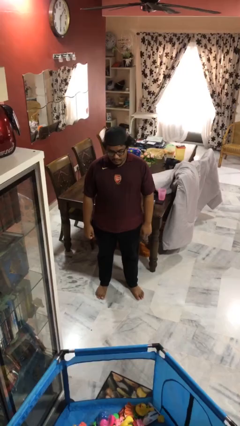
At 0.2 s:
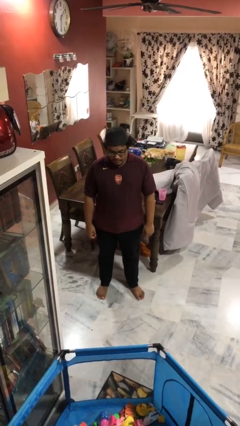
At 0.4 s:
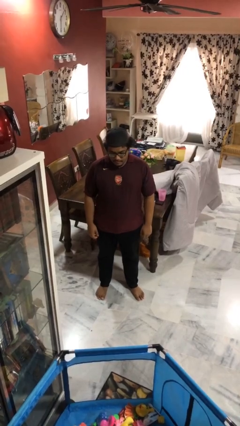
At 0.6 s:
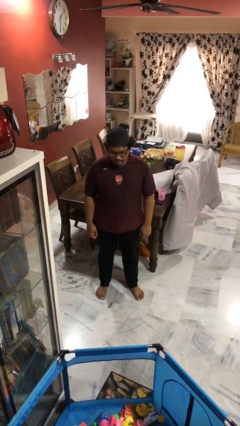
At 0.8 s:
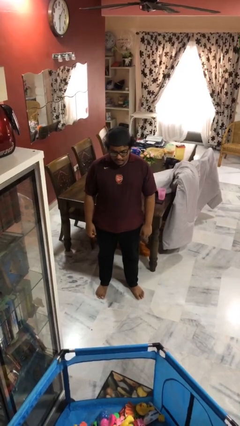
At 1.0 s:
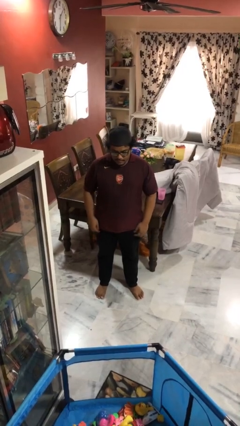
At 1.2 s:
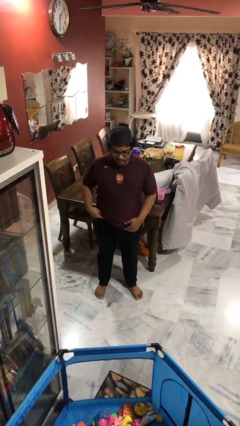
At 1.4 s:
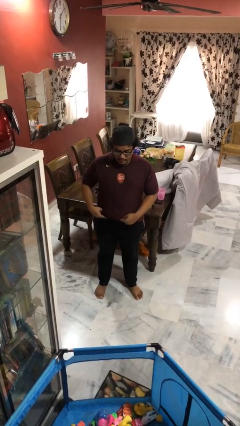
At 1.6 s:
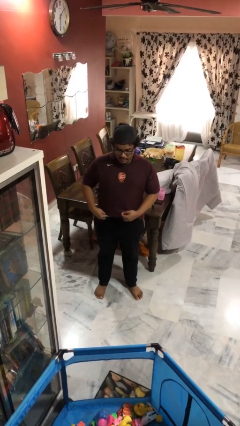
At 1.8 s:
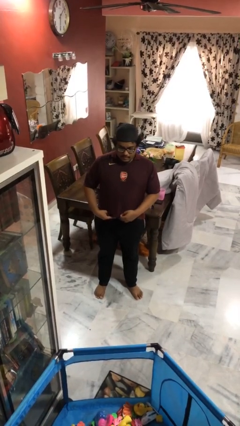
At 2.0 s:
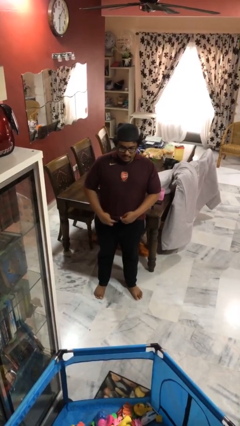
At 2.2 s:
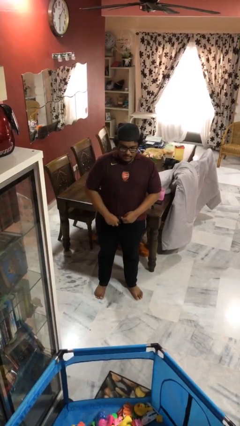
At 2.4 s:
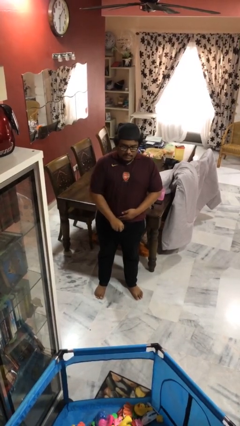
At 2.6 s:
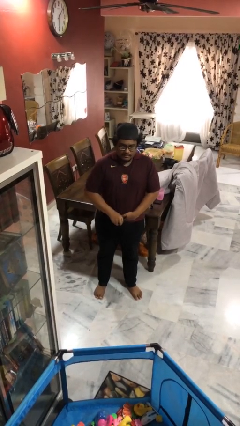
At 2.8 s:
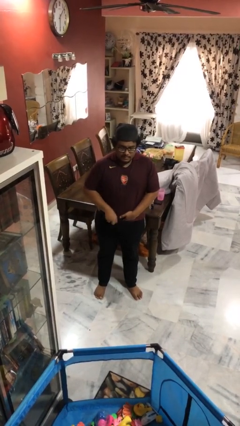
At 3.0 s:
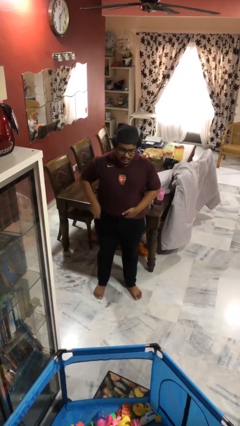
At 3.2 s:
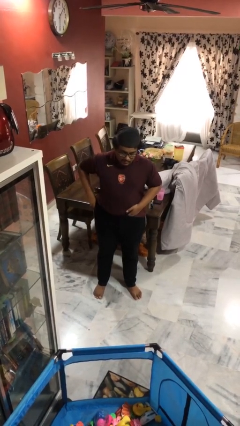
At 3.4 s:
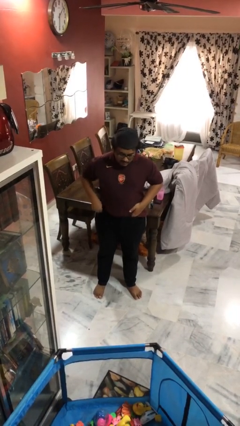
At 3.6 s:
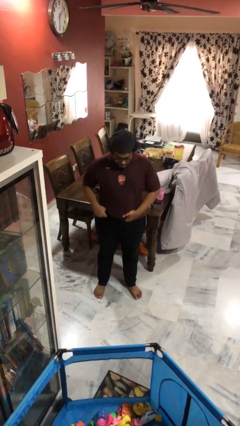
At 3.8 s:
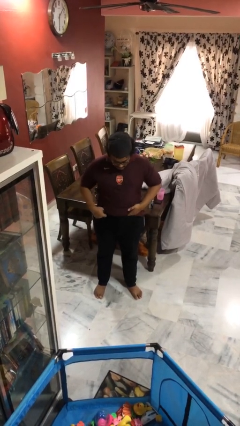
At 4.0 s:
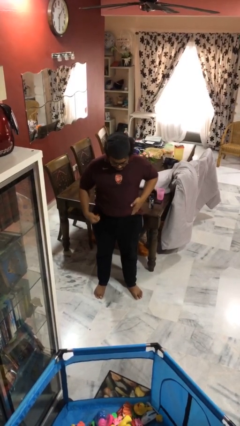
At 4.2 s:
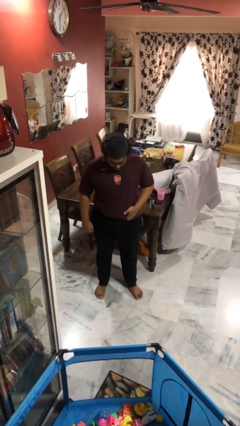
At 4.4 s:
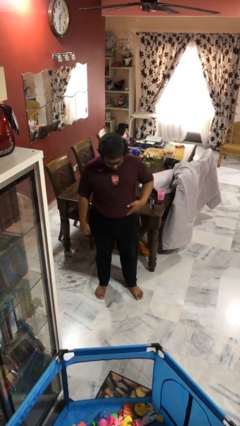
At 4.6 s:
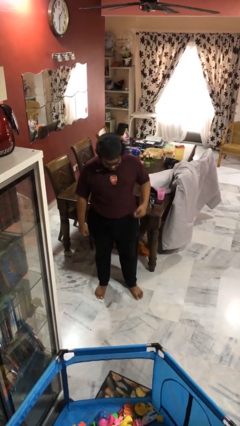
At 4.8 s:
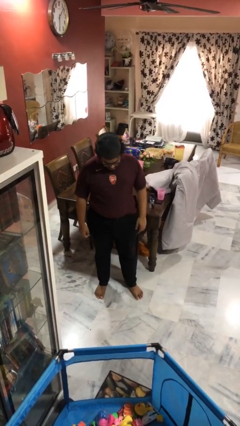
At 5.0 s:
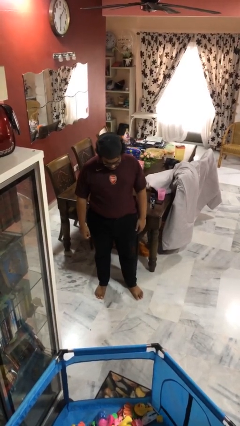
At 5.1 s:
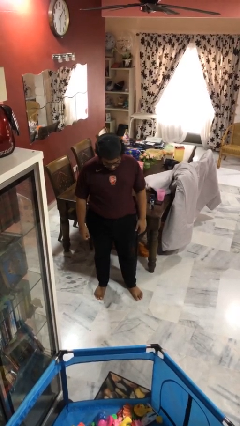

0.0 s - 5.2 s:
person tucks in shirt

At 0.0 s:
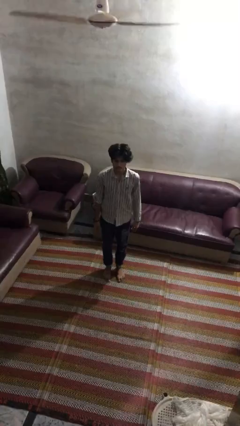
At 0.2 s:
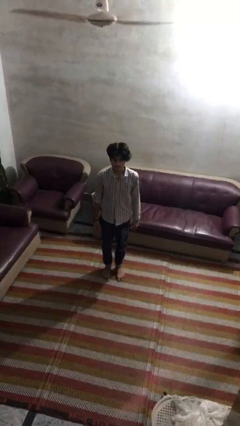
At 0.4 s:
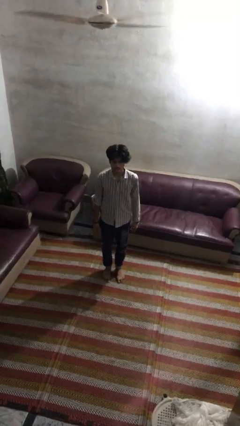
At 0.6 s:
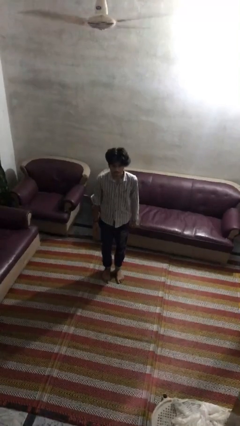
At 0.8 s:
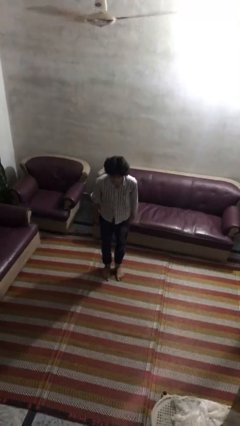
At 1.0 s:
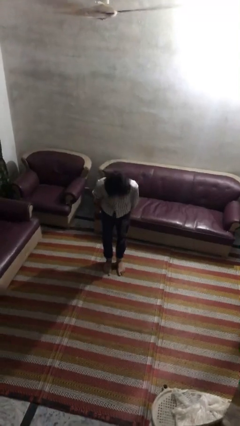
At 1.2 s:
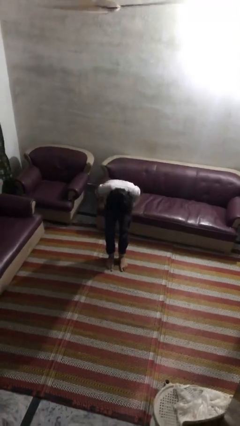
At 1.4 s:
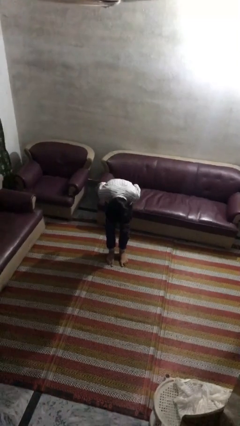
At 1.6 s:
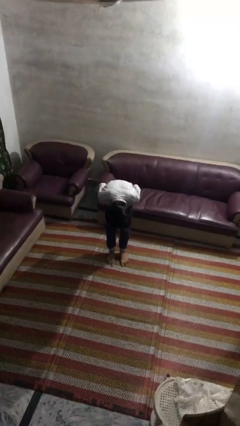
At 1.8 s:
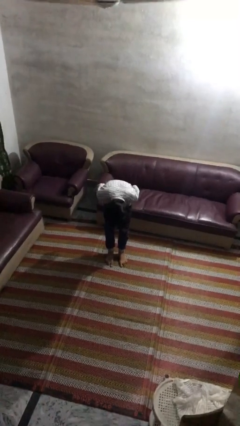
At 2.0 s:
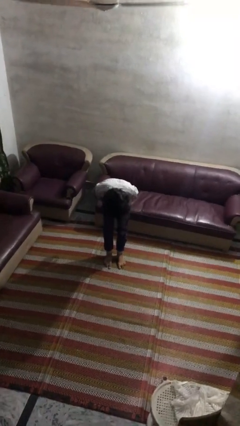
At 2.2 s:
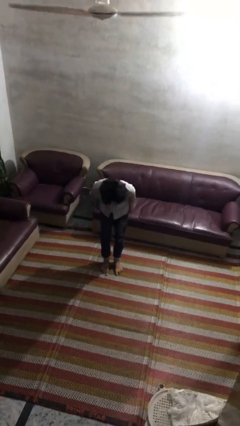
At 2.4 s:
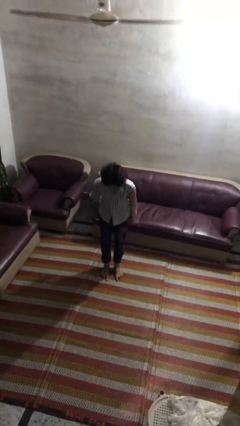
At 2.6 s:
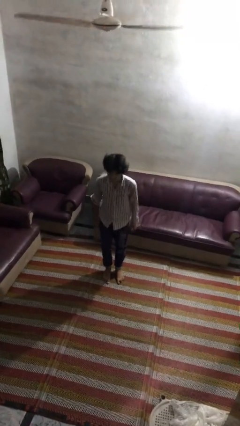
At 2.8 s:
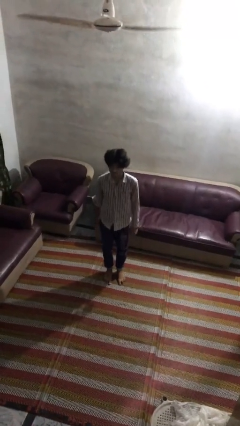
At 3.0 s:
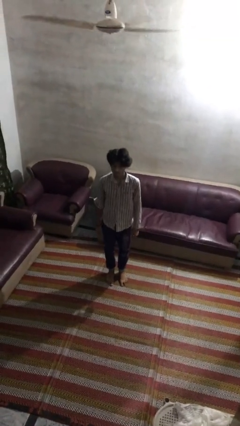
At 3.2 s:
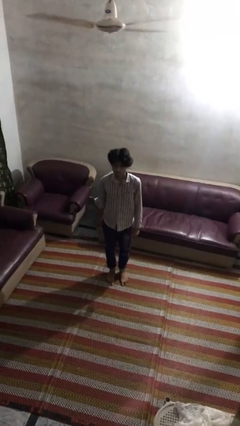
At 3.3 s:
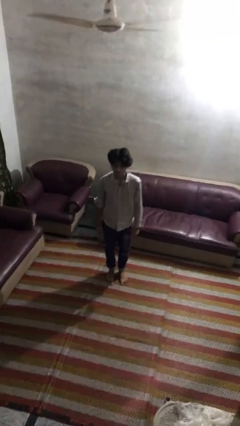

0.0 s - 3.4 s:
person bows

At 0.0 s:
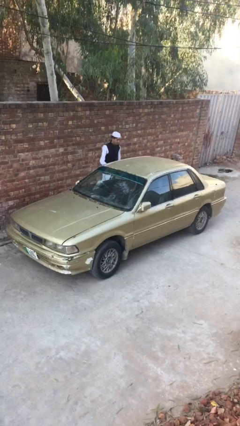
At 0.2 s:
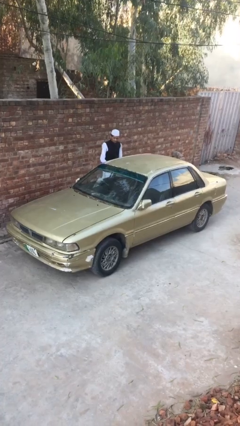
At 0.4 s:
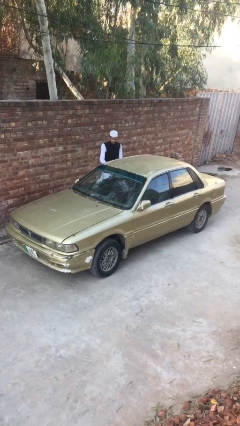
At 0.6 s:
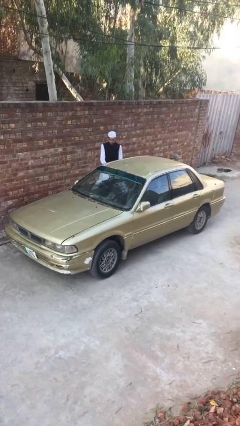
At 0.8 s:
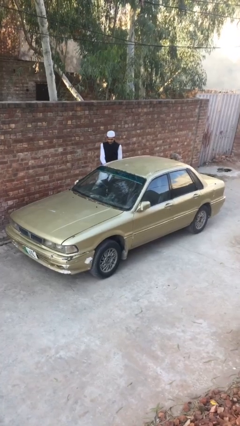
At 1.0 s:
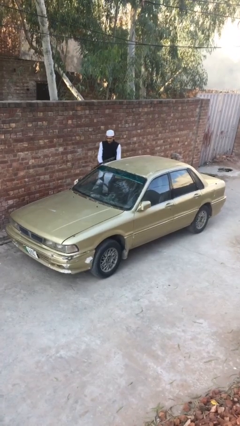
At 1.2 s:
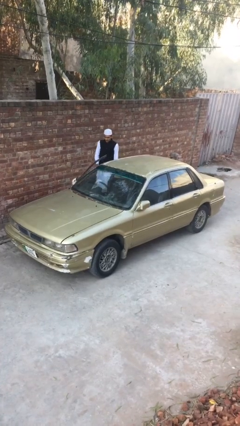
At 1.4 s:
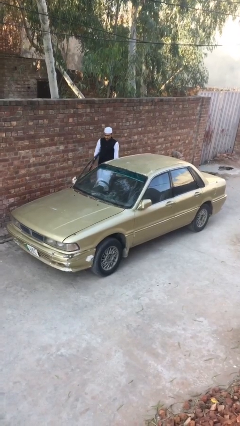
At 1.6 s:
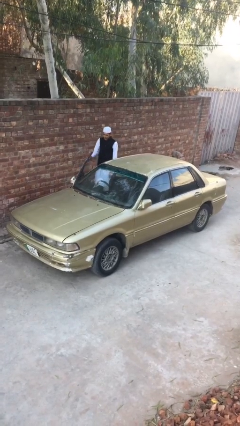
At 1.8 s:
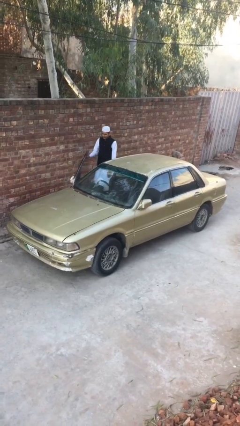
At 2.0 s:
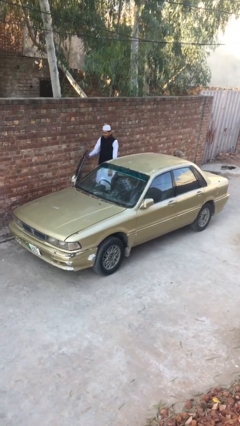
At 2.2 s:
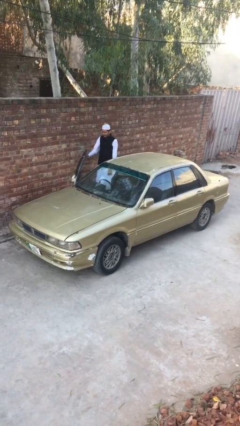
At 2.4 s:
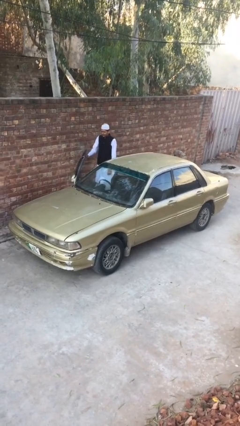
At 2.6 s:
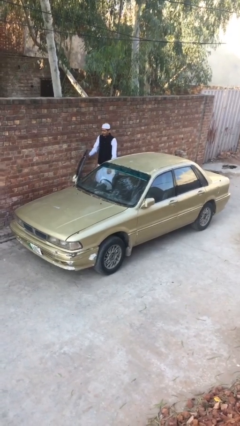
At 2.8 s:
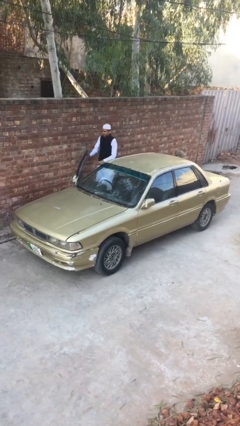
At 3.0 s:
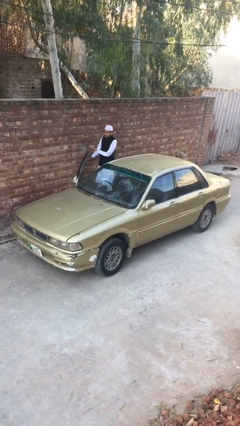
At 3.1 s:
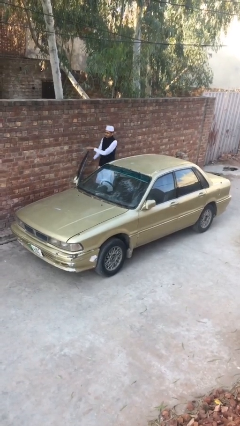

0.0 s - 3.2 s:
person opens car door

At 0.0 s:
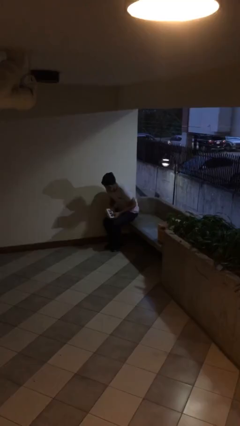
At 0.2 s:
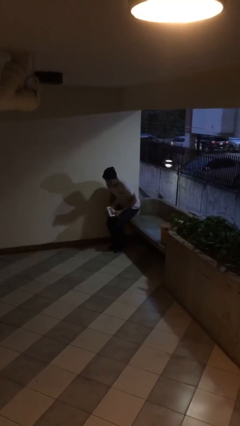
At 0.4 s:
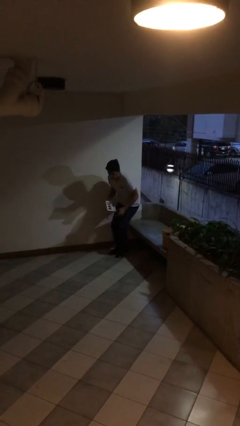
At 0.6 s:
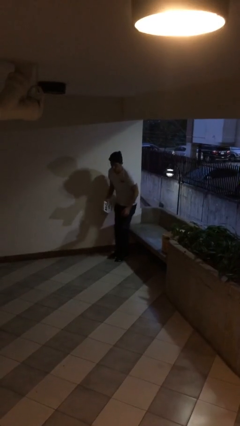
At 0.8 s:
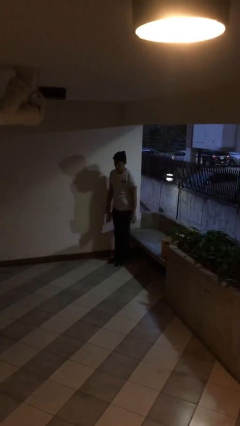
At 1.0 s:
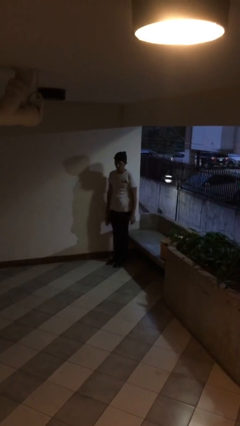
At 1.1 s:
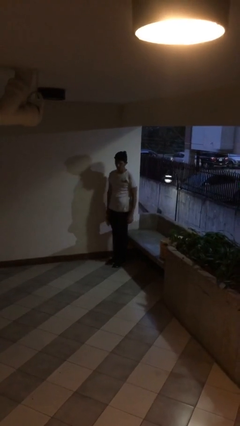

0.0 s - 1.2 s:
person stands up

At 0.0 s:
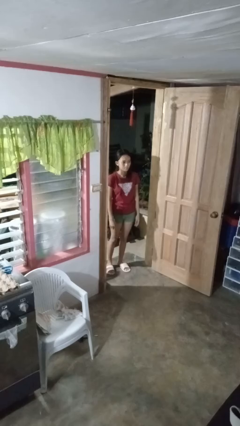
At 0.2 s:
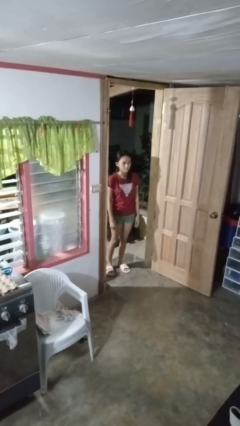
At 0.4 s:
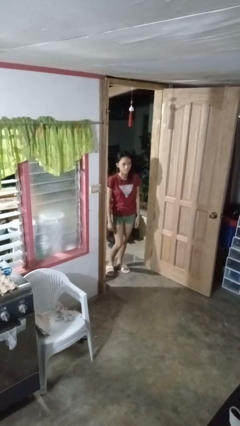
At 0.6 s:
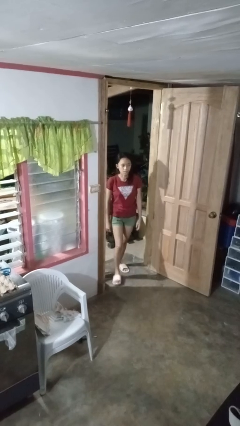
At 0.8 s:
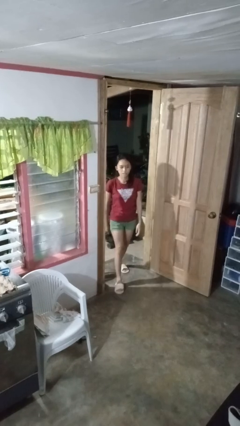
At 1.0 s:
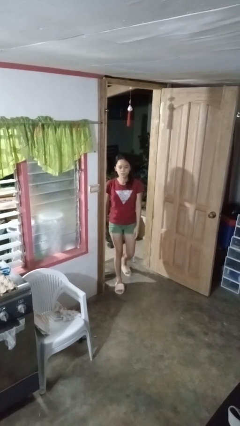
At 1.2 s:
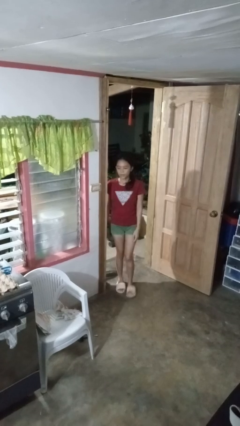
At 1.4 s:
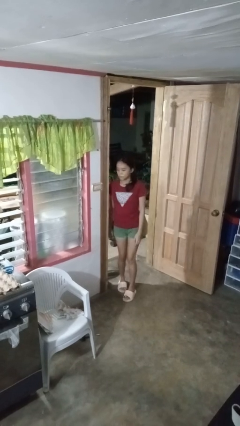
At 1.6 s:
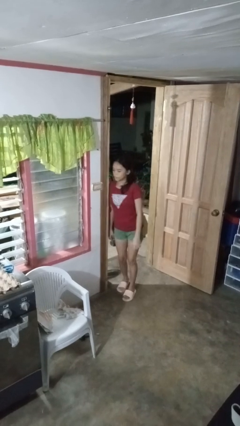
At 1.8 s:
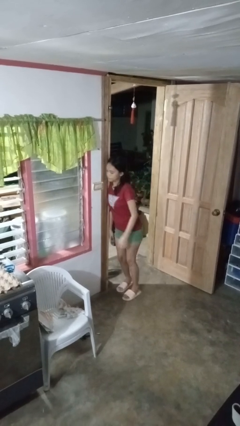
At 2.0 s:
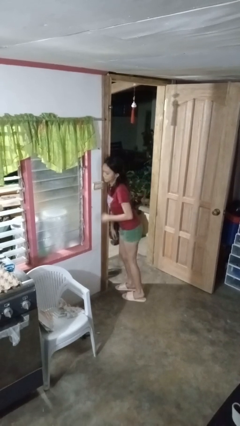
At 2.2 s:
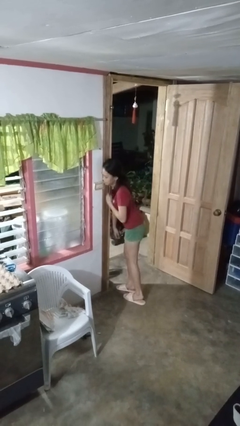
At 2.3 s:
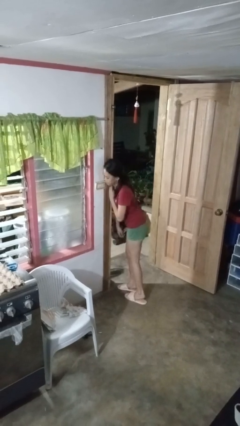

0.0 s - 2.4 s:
person bumps into wall

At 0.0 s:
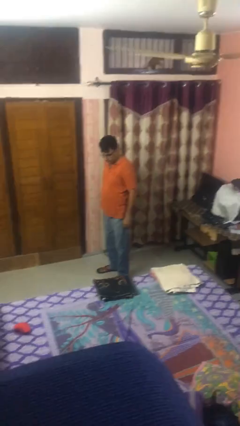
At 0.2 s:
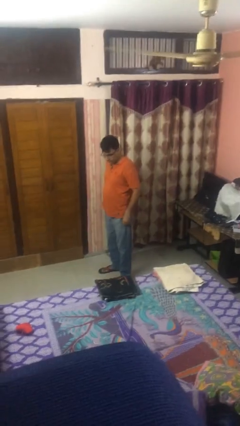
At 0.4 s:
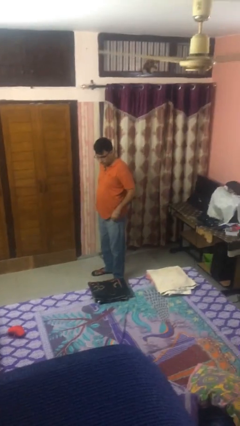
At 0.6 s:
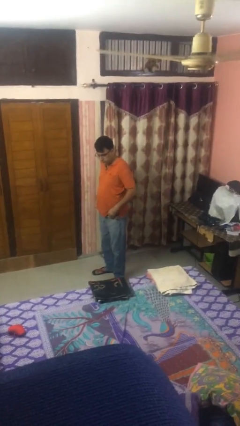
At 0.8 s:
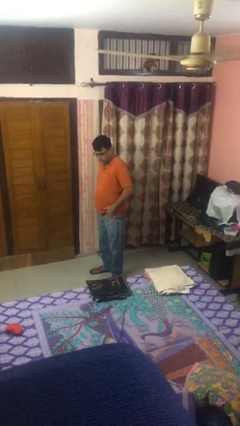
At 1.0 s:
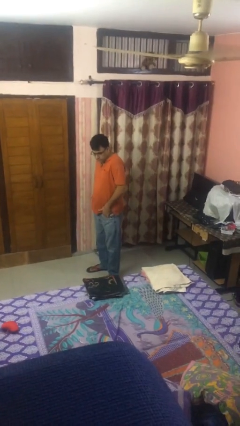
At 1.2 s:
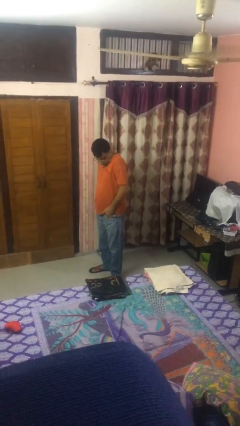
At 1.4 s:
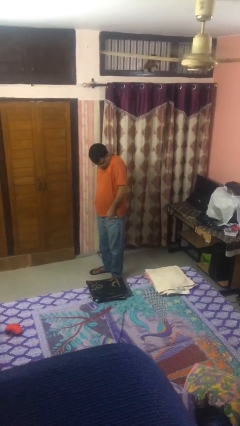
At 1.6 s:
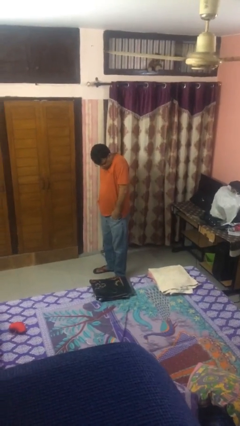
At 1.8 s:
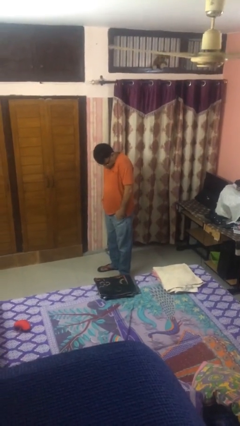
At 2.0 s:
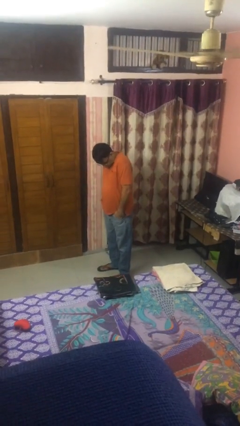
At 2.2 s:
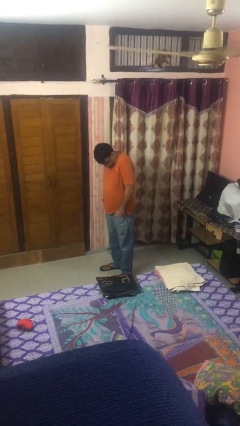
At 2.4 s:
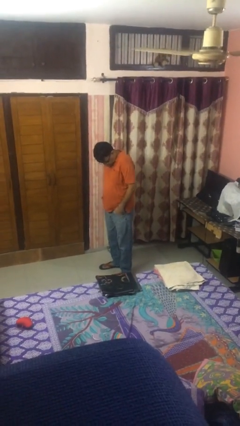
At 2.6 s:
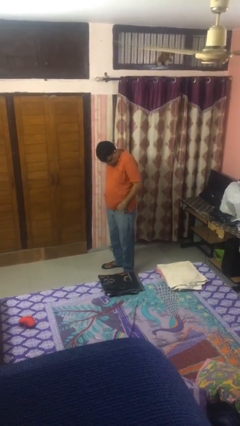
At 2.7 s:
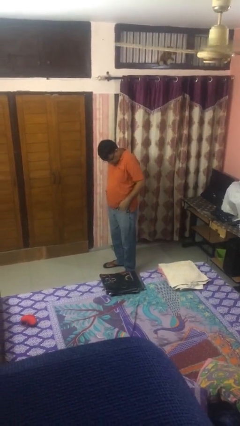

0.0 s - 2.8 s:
person puts hands in back pockets
